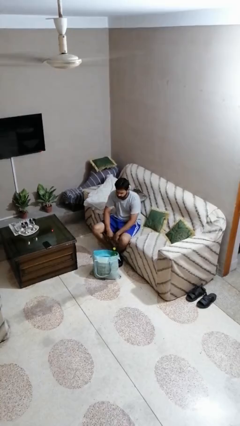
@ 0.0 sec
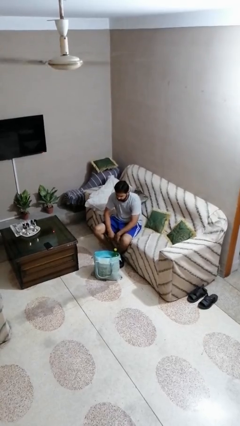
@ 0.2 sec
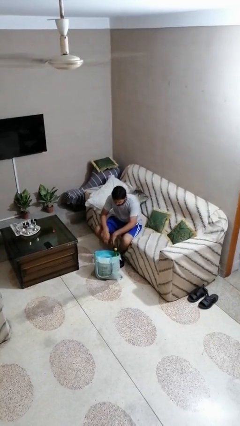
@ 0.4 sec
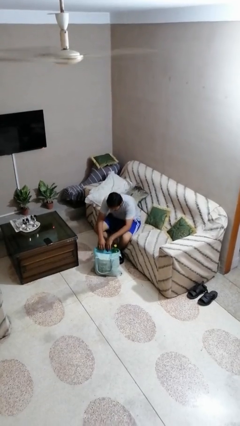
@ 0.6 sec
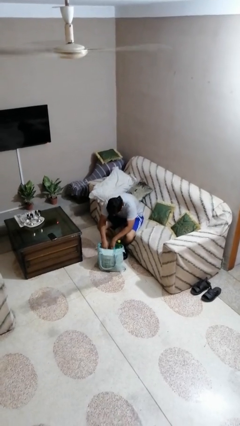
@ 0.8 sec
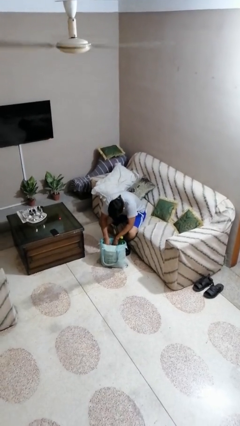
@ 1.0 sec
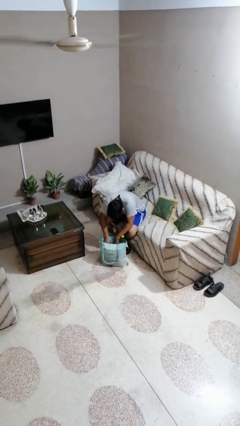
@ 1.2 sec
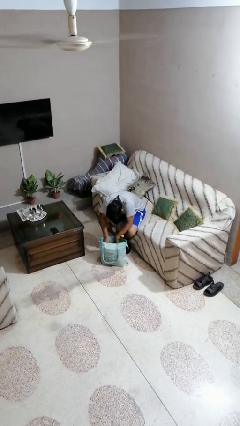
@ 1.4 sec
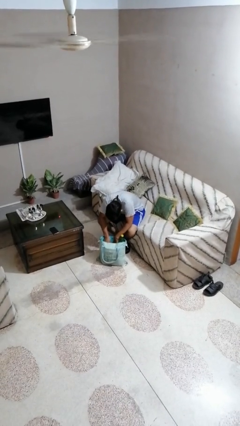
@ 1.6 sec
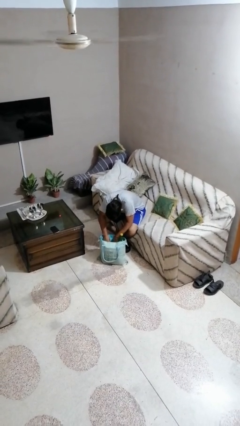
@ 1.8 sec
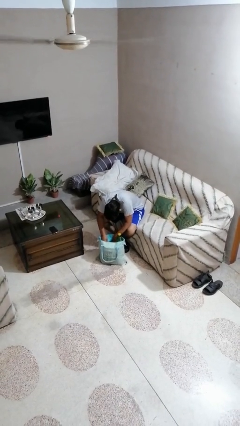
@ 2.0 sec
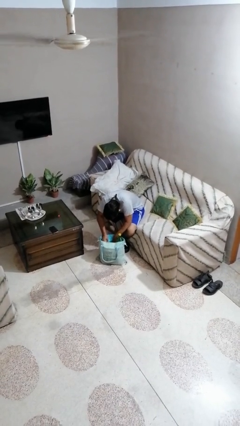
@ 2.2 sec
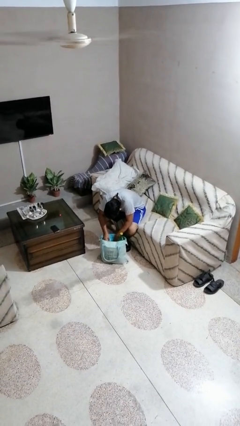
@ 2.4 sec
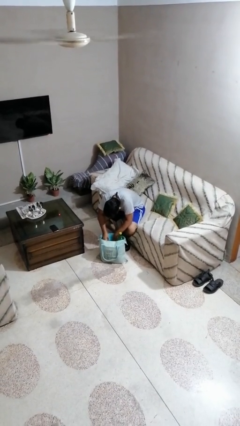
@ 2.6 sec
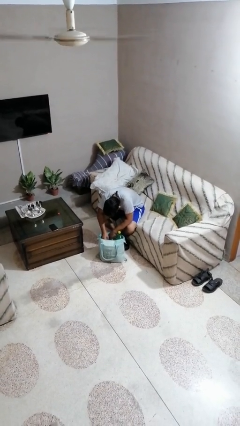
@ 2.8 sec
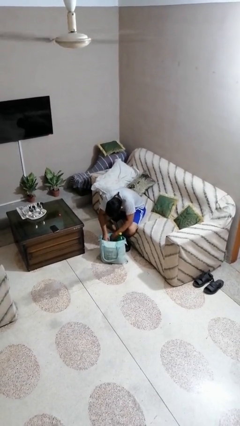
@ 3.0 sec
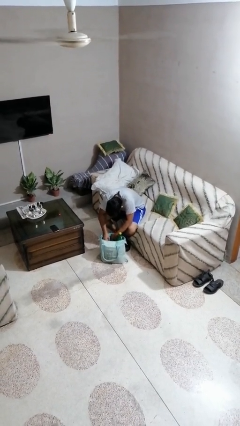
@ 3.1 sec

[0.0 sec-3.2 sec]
person searches in bag

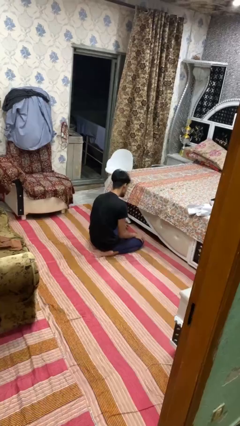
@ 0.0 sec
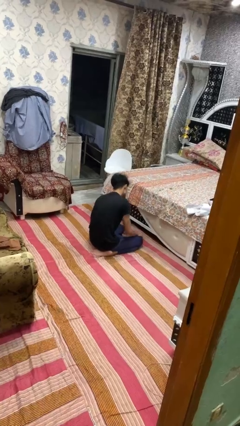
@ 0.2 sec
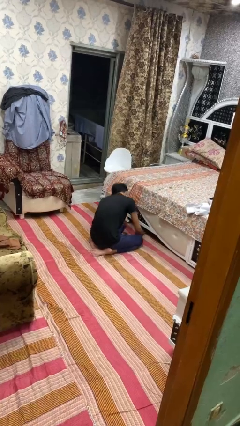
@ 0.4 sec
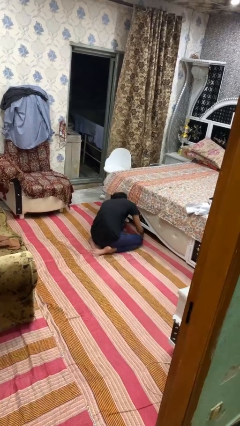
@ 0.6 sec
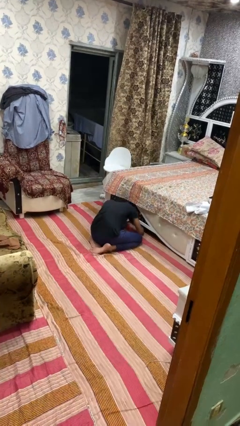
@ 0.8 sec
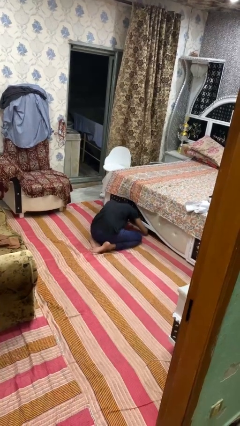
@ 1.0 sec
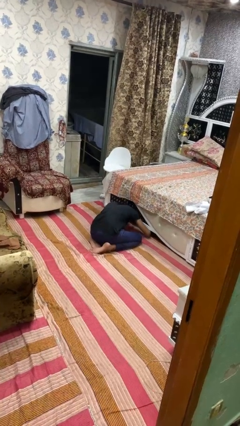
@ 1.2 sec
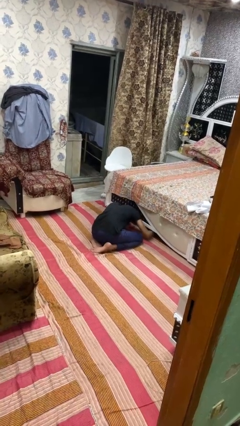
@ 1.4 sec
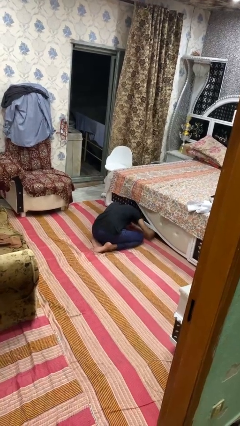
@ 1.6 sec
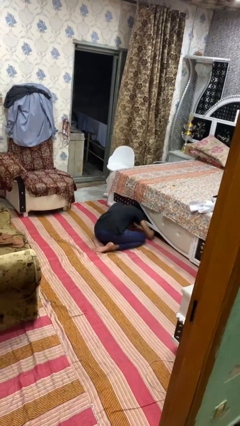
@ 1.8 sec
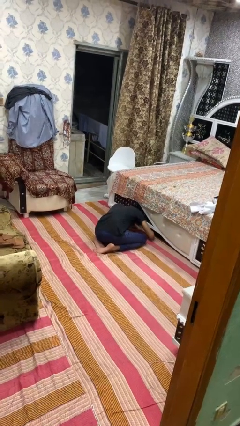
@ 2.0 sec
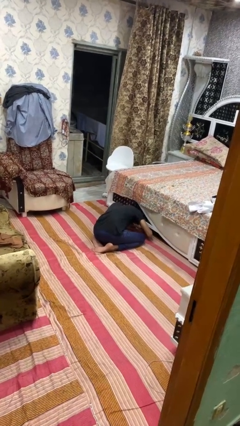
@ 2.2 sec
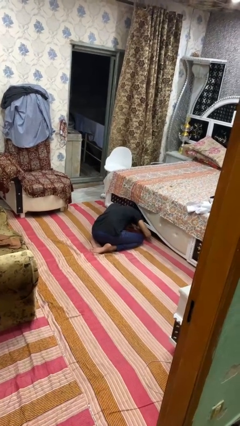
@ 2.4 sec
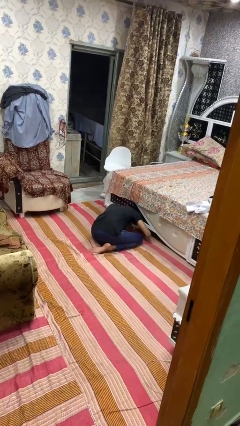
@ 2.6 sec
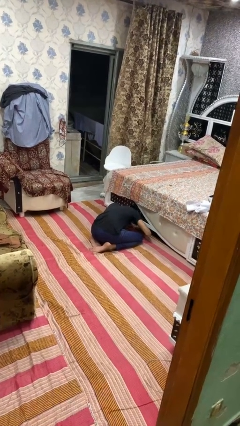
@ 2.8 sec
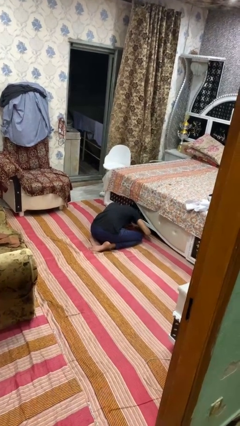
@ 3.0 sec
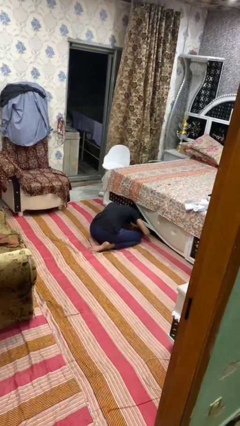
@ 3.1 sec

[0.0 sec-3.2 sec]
person searches under bed

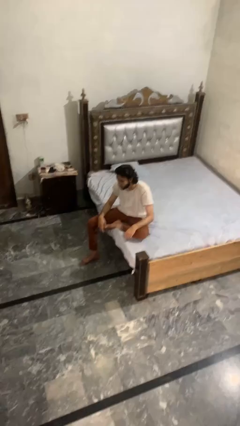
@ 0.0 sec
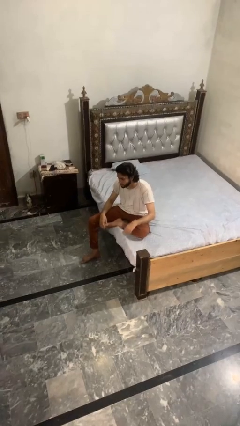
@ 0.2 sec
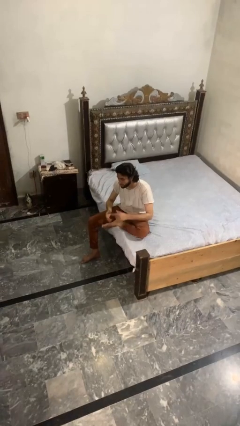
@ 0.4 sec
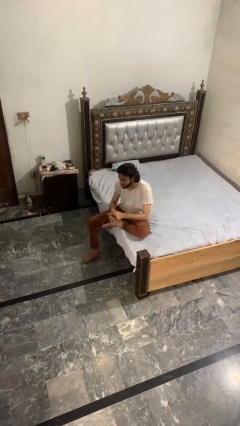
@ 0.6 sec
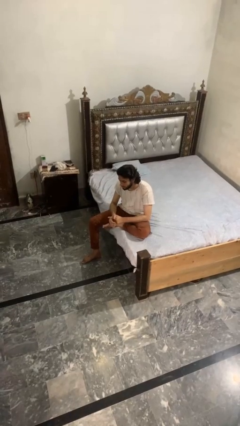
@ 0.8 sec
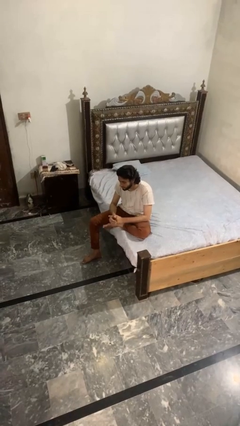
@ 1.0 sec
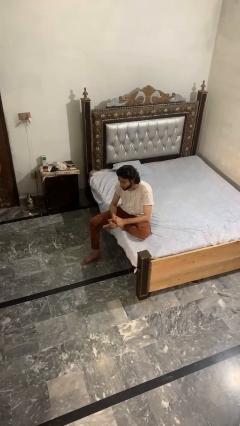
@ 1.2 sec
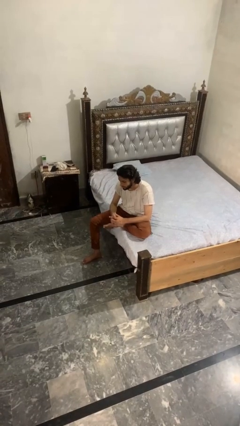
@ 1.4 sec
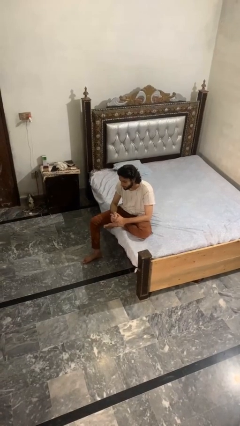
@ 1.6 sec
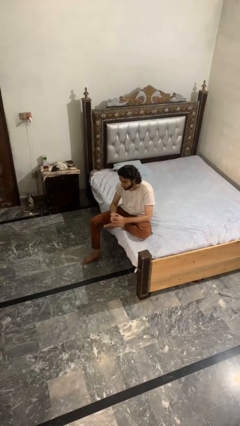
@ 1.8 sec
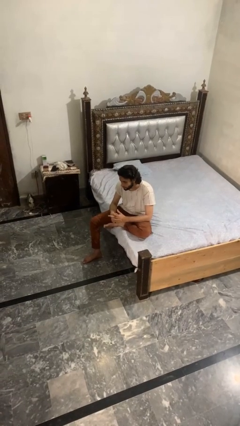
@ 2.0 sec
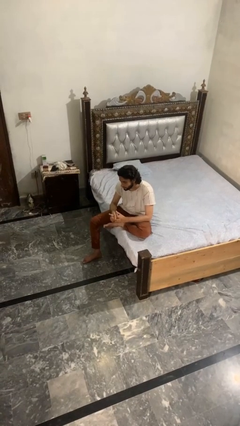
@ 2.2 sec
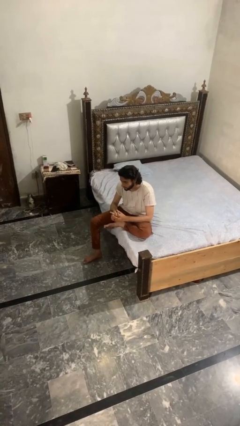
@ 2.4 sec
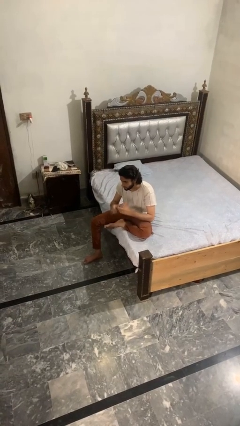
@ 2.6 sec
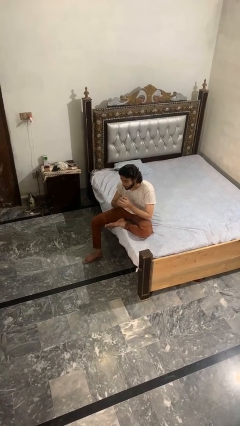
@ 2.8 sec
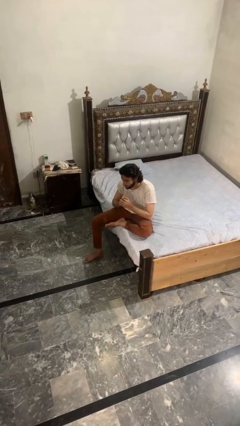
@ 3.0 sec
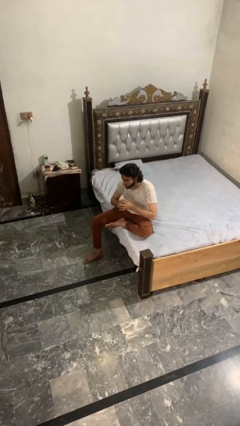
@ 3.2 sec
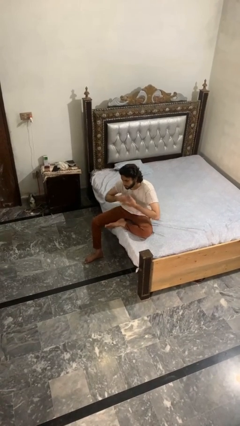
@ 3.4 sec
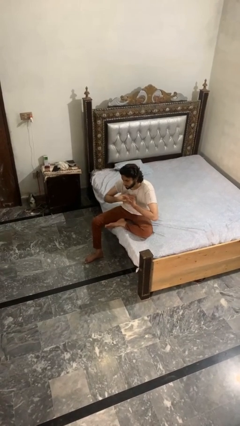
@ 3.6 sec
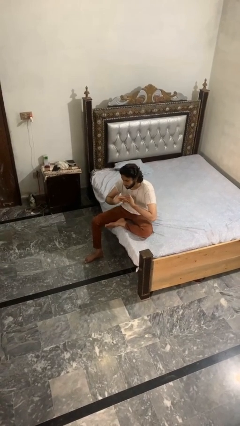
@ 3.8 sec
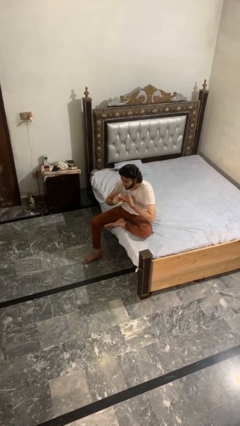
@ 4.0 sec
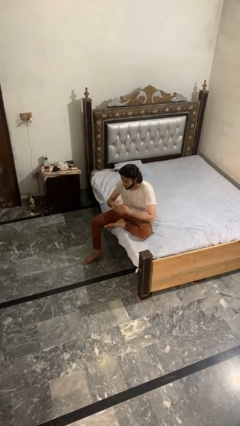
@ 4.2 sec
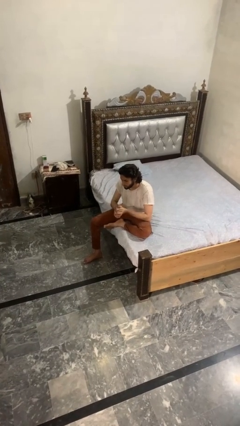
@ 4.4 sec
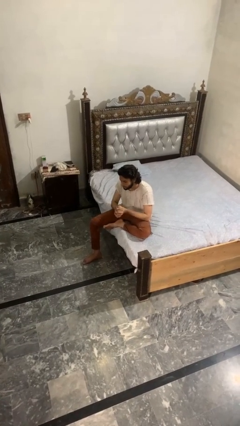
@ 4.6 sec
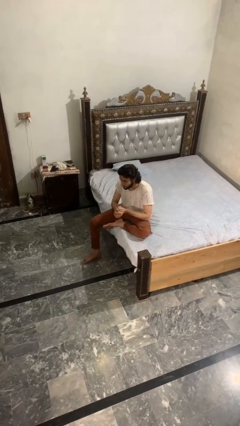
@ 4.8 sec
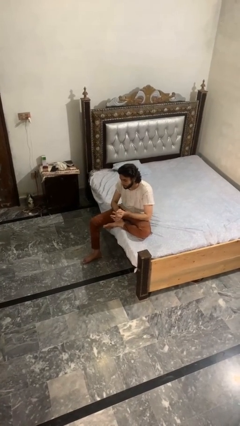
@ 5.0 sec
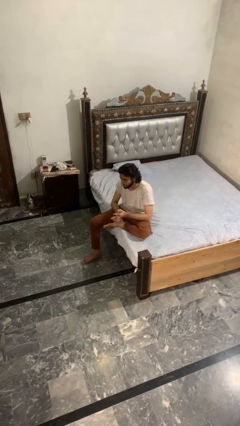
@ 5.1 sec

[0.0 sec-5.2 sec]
person cracks knuckles

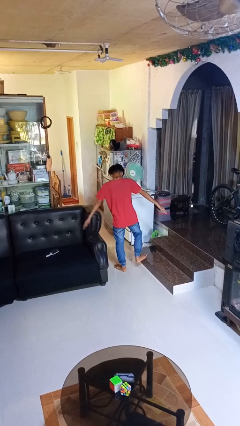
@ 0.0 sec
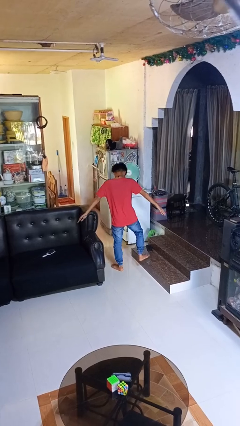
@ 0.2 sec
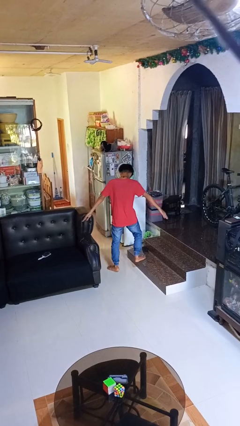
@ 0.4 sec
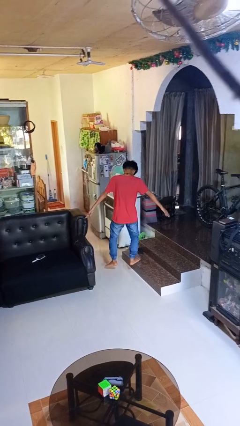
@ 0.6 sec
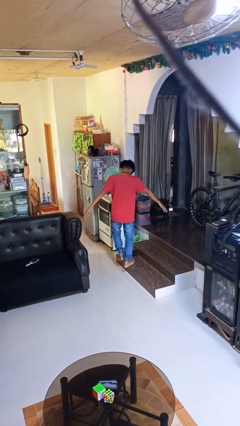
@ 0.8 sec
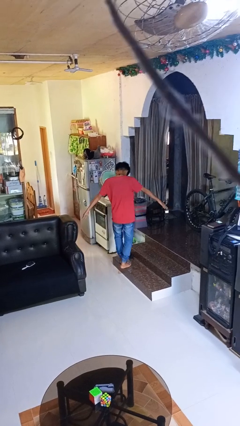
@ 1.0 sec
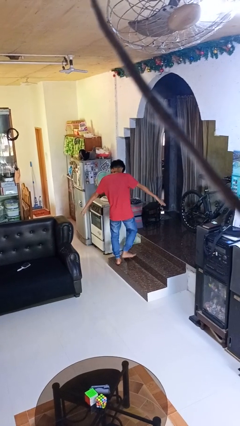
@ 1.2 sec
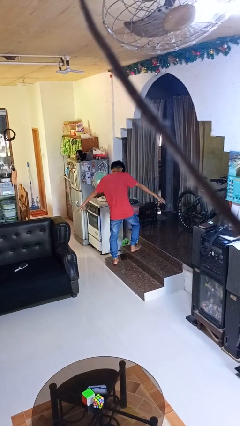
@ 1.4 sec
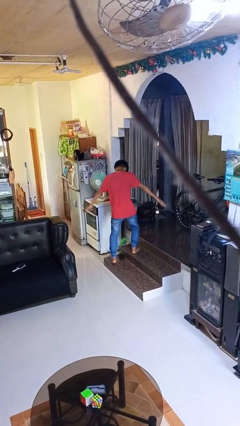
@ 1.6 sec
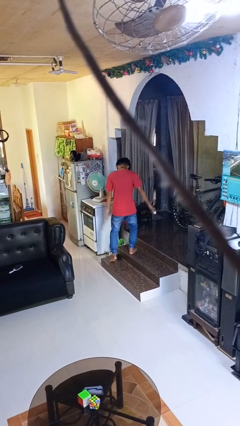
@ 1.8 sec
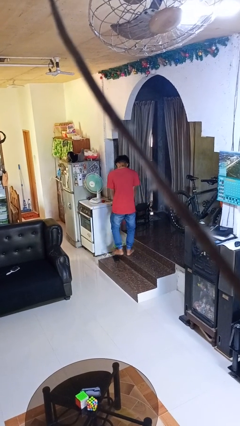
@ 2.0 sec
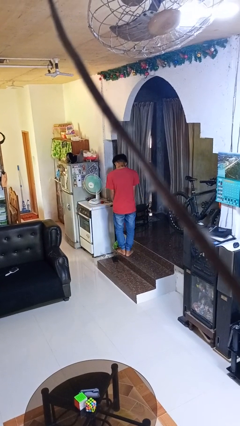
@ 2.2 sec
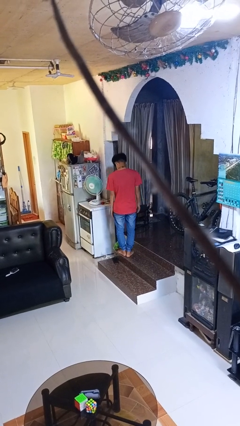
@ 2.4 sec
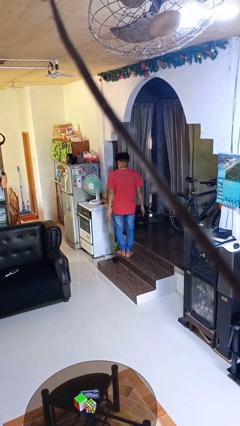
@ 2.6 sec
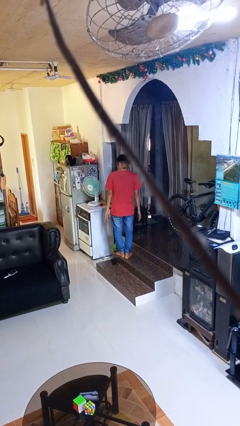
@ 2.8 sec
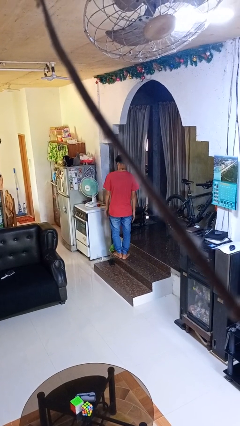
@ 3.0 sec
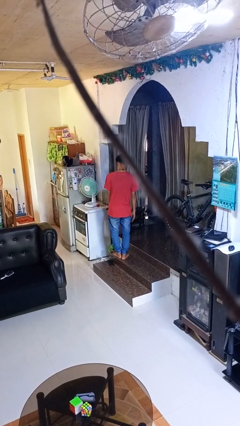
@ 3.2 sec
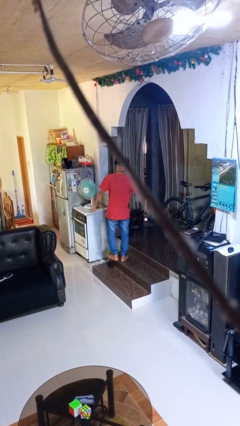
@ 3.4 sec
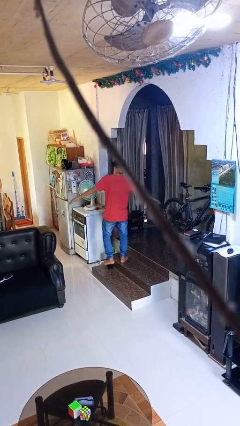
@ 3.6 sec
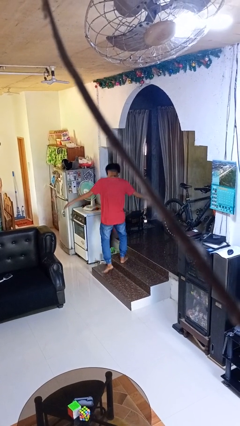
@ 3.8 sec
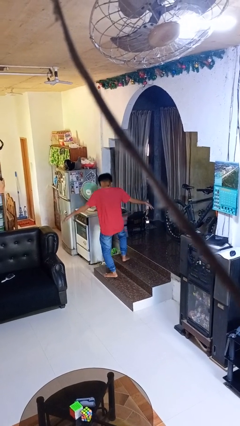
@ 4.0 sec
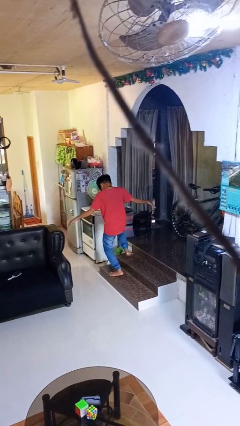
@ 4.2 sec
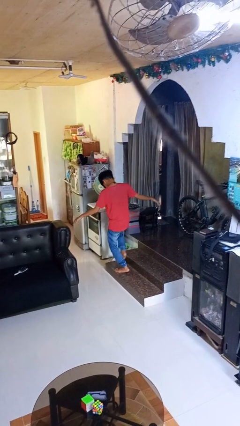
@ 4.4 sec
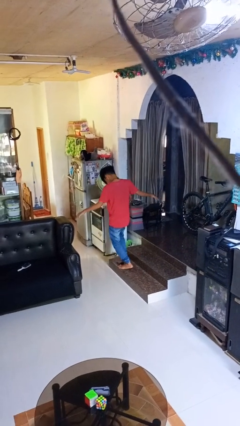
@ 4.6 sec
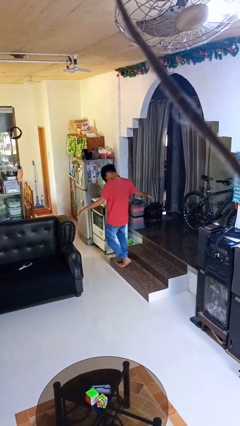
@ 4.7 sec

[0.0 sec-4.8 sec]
person picks up object from floor

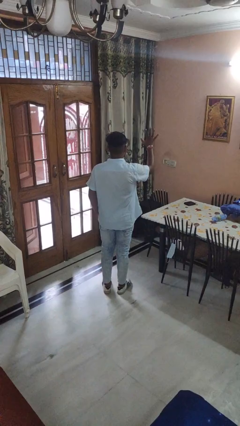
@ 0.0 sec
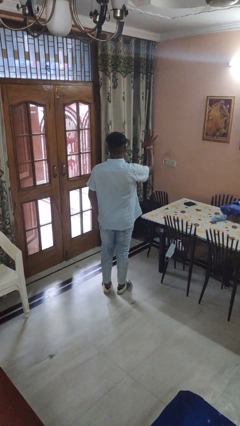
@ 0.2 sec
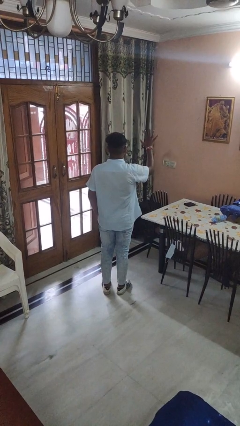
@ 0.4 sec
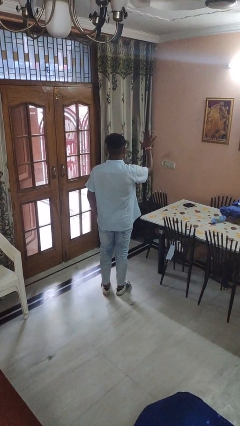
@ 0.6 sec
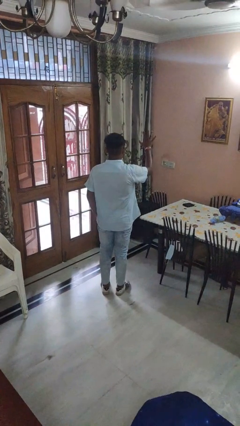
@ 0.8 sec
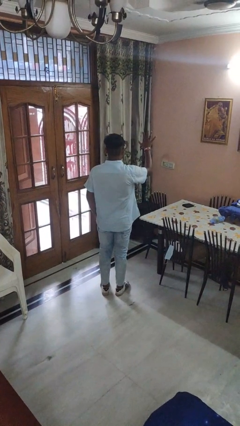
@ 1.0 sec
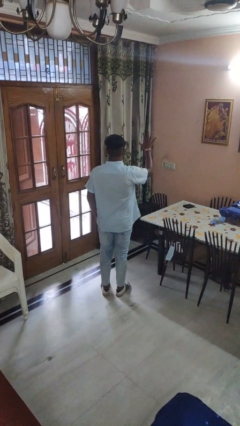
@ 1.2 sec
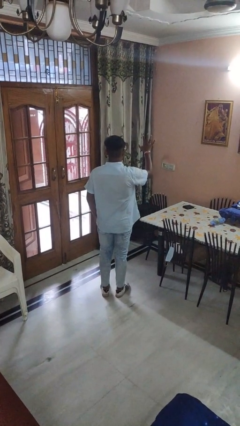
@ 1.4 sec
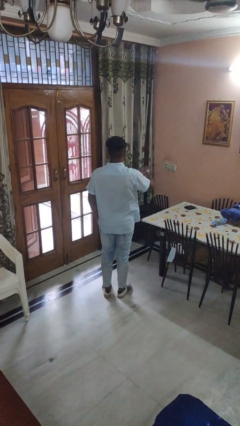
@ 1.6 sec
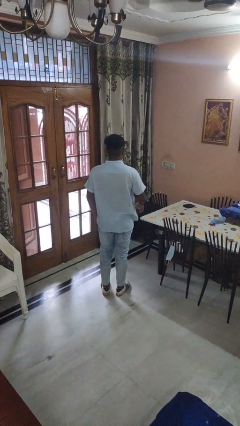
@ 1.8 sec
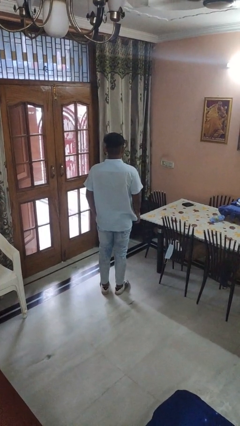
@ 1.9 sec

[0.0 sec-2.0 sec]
person gestures number five
